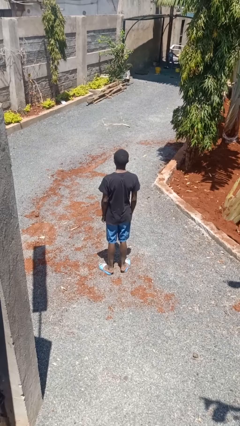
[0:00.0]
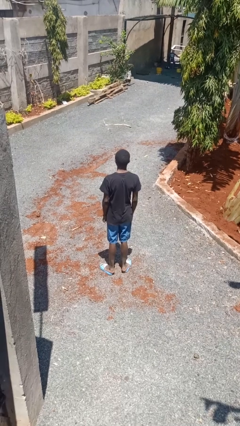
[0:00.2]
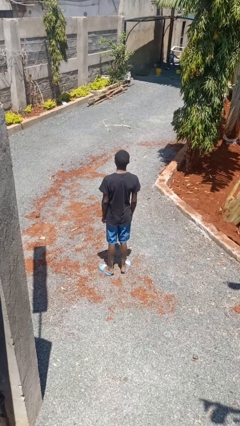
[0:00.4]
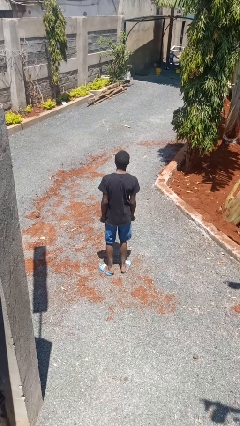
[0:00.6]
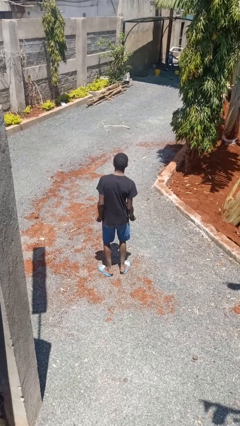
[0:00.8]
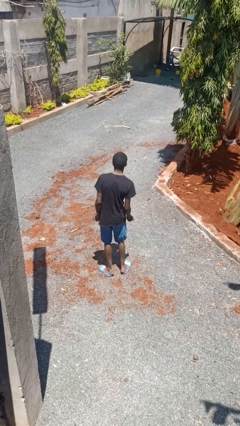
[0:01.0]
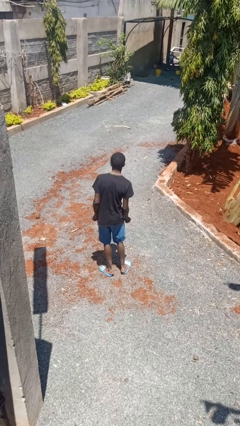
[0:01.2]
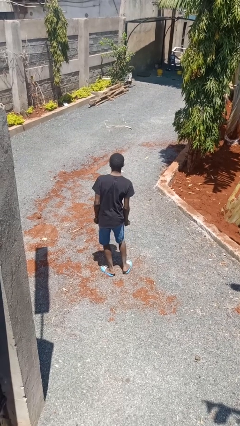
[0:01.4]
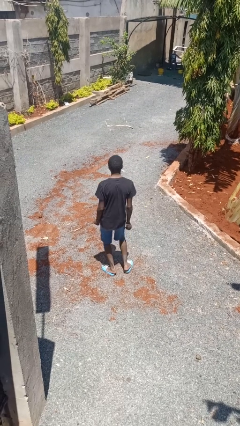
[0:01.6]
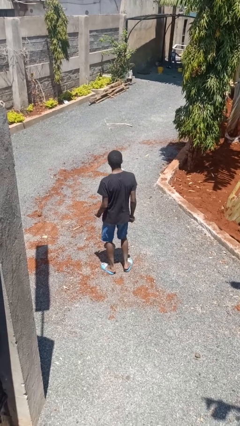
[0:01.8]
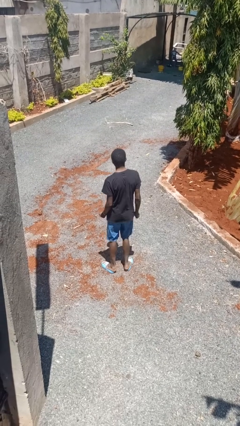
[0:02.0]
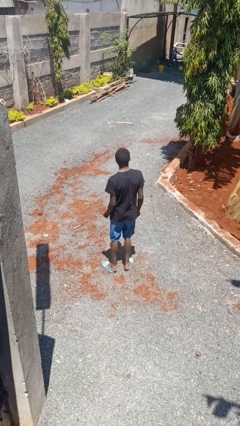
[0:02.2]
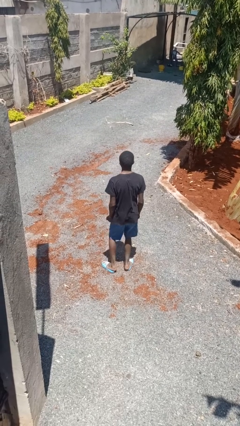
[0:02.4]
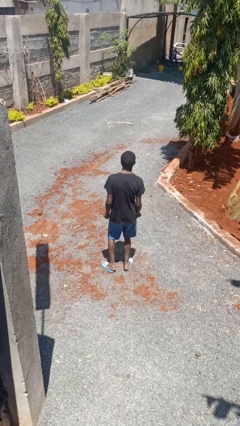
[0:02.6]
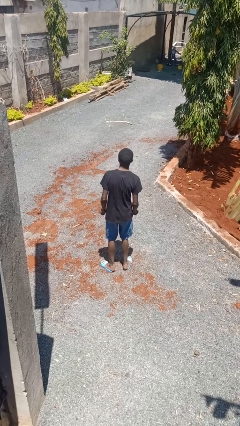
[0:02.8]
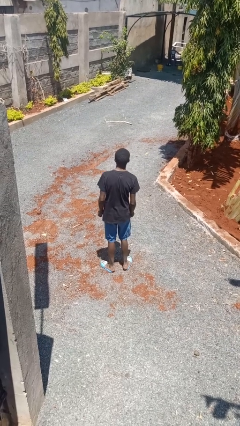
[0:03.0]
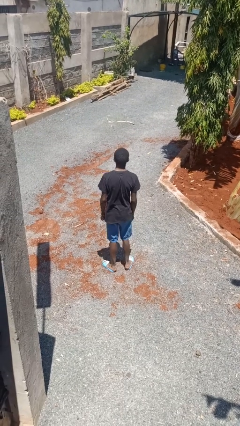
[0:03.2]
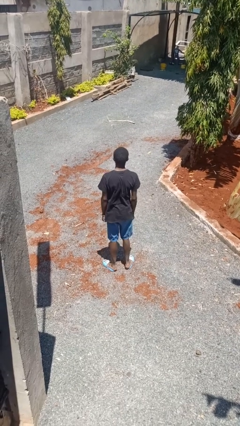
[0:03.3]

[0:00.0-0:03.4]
person dances in place

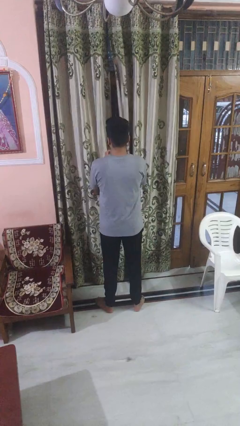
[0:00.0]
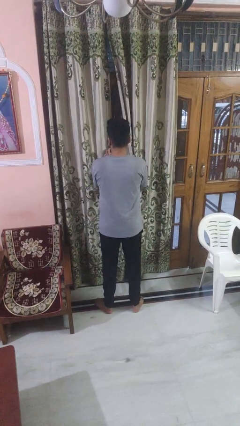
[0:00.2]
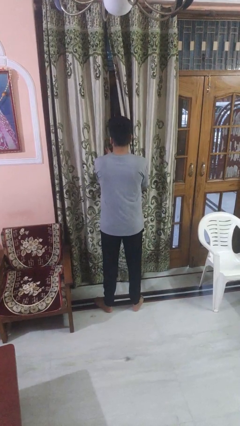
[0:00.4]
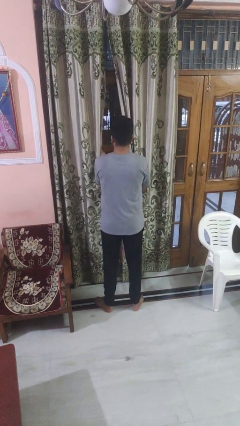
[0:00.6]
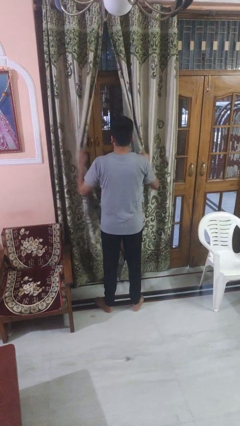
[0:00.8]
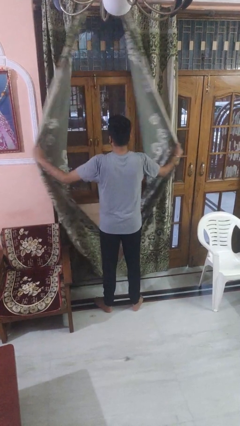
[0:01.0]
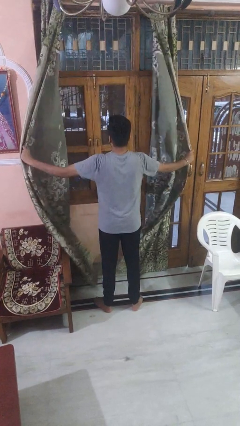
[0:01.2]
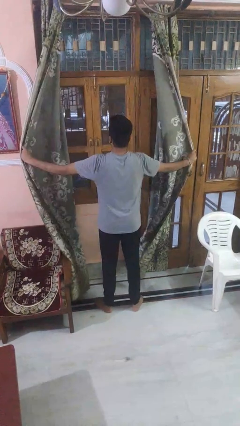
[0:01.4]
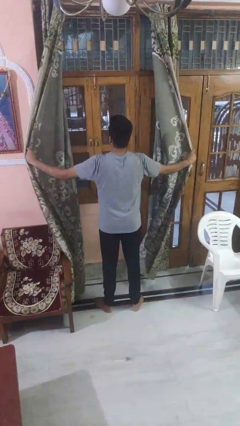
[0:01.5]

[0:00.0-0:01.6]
person opens curtains

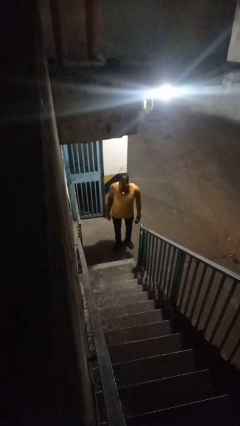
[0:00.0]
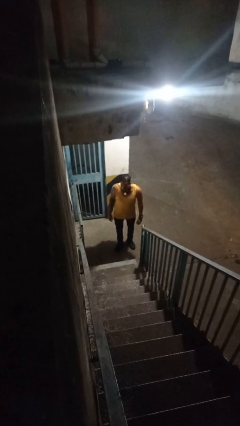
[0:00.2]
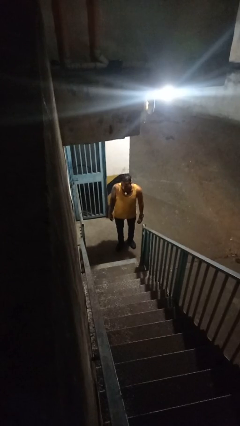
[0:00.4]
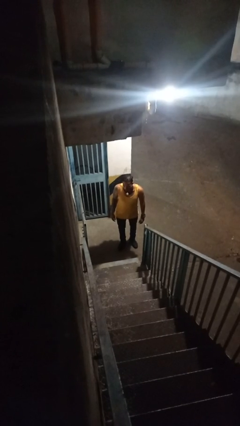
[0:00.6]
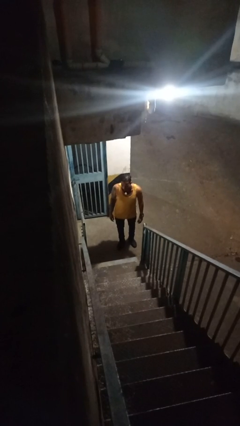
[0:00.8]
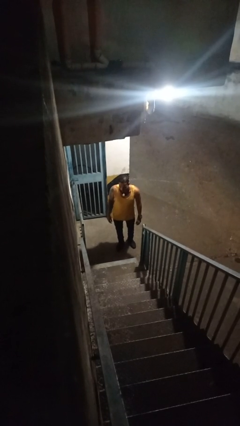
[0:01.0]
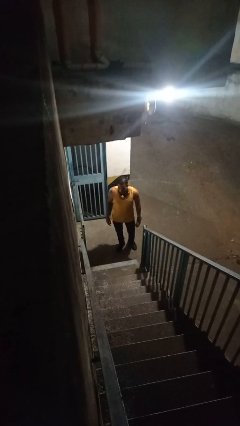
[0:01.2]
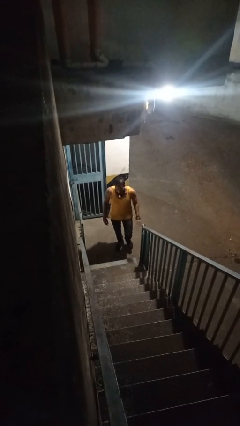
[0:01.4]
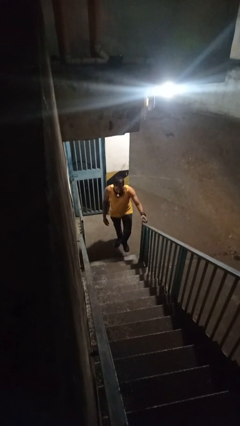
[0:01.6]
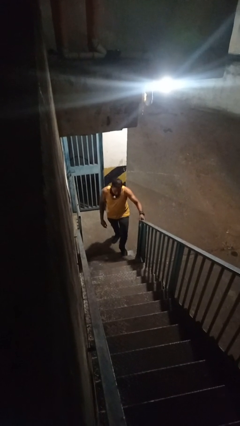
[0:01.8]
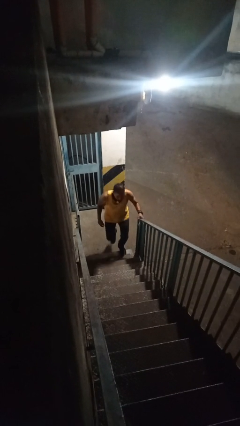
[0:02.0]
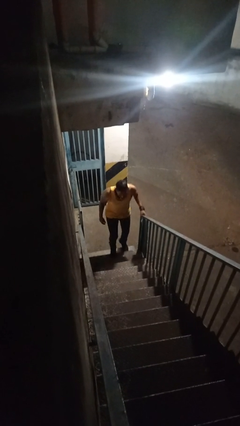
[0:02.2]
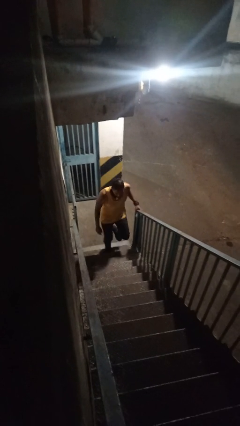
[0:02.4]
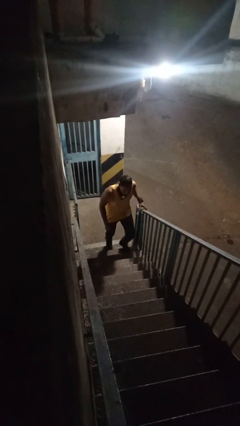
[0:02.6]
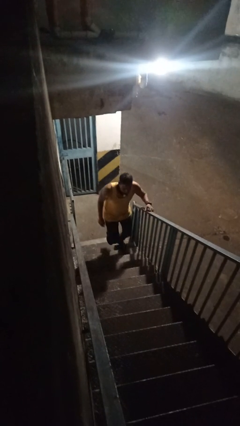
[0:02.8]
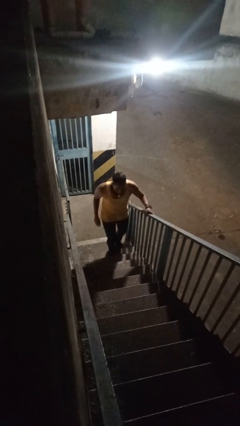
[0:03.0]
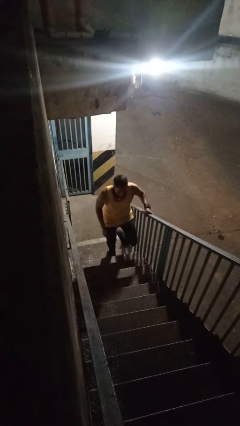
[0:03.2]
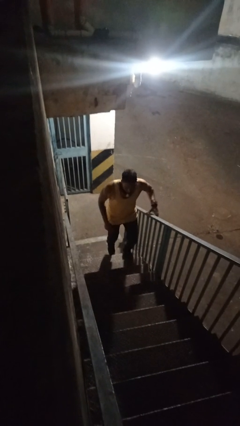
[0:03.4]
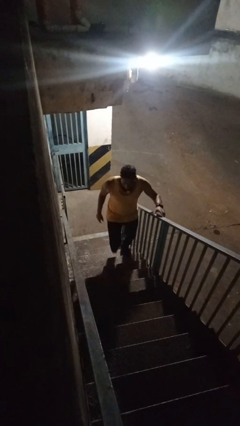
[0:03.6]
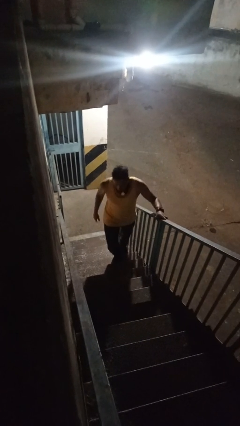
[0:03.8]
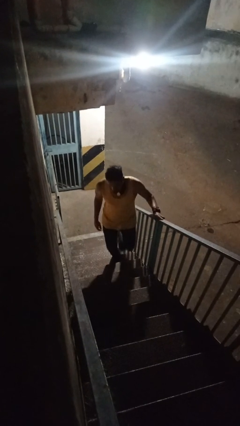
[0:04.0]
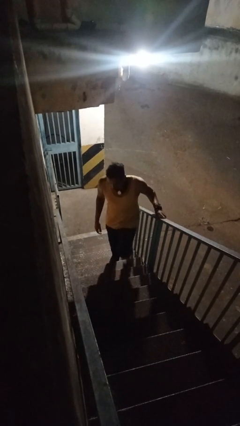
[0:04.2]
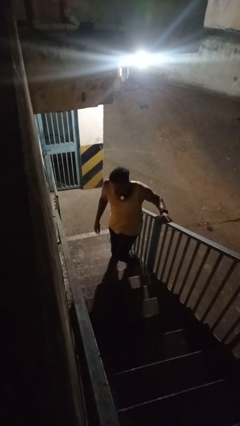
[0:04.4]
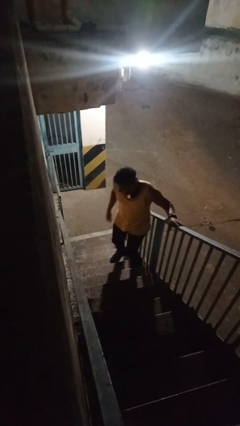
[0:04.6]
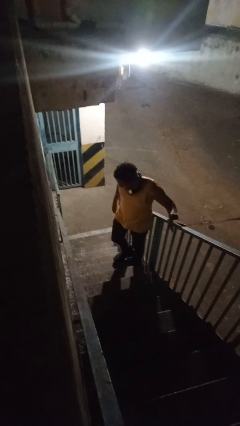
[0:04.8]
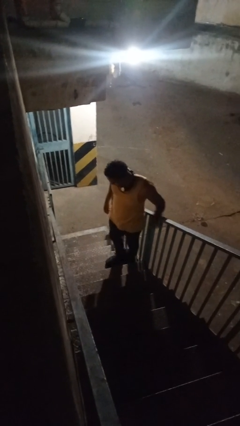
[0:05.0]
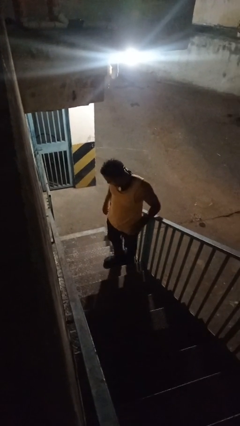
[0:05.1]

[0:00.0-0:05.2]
person climbs up stairs

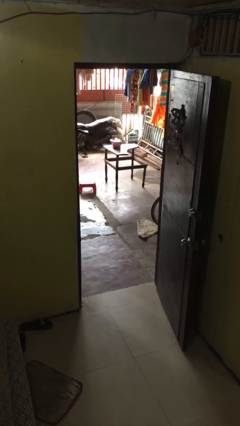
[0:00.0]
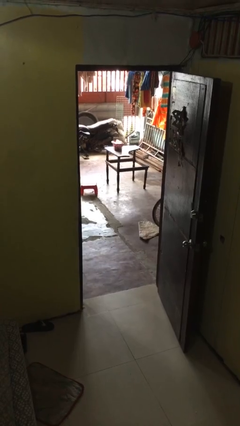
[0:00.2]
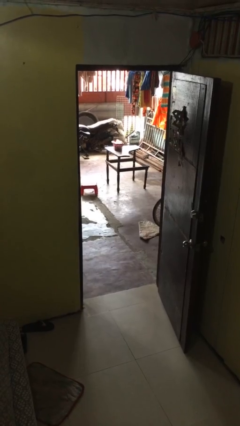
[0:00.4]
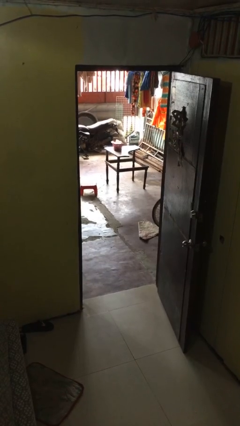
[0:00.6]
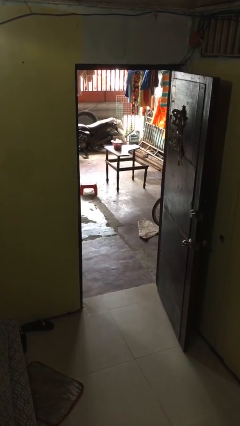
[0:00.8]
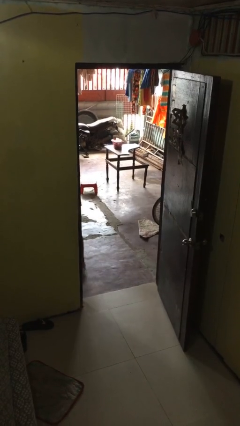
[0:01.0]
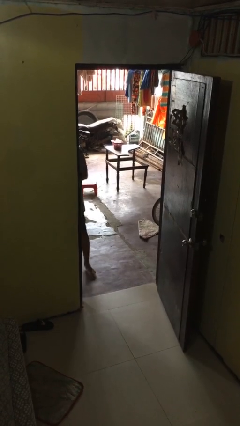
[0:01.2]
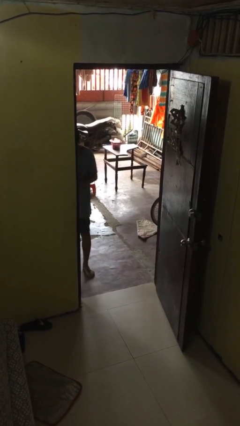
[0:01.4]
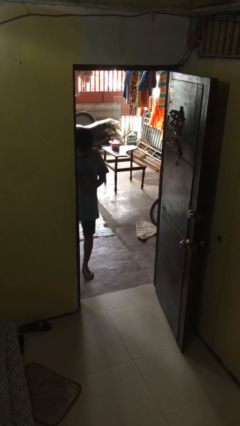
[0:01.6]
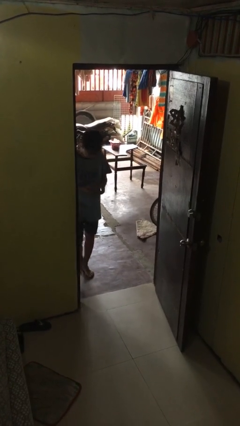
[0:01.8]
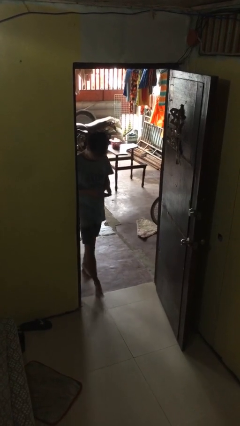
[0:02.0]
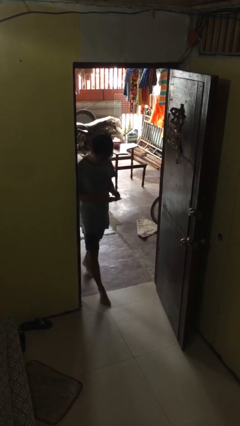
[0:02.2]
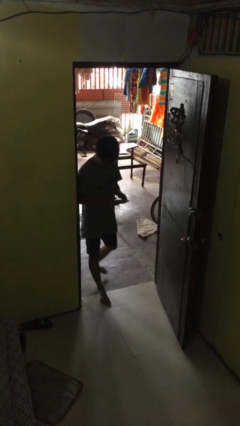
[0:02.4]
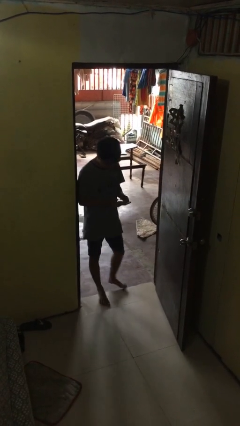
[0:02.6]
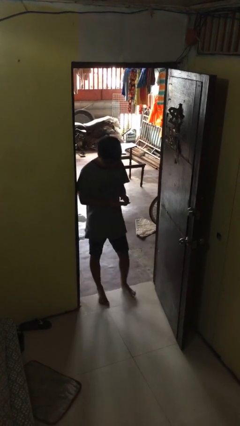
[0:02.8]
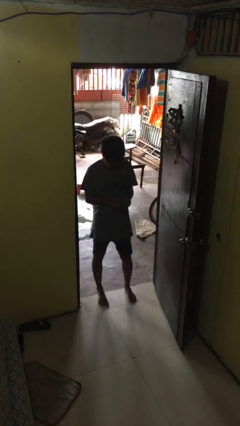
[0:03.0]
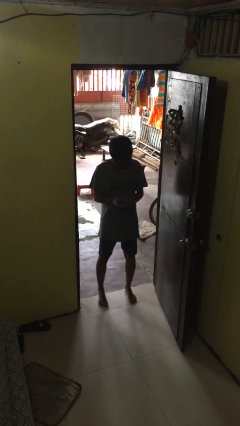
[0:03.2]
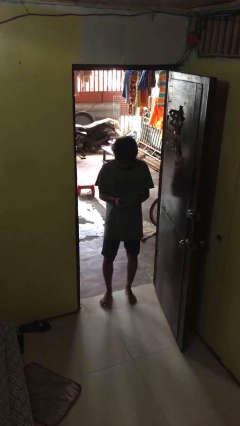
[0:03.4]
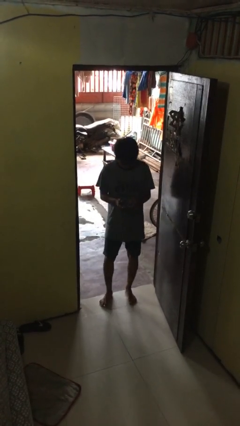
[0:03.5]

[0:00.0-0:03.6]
person enters scene through structure

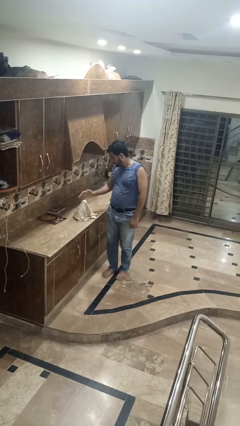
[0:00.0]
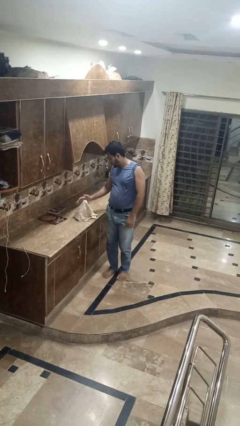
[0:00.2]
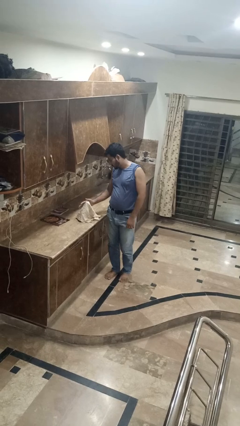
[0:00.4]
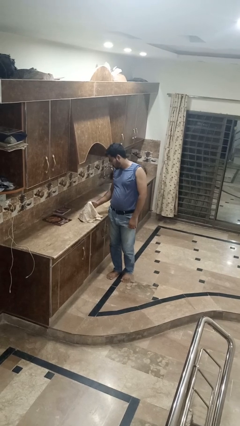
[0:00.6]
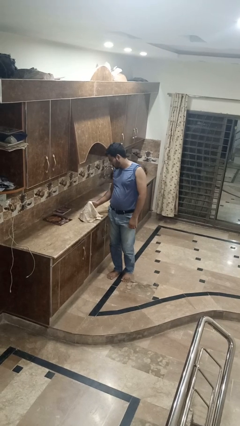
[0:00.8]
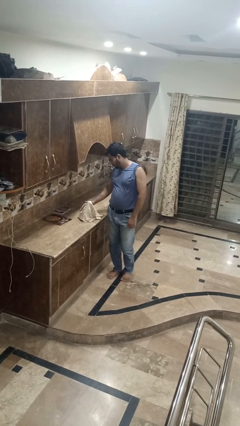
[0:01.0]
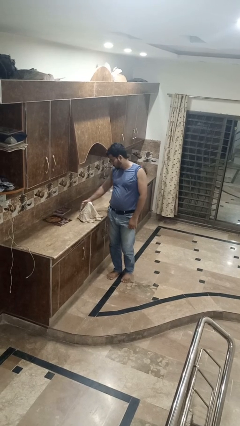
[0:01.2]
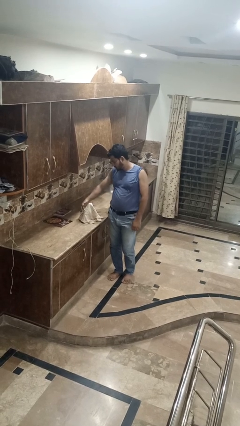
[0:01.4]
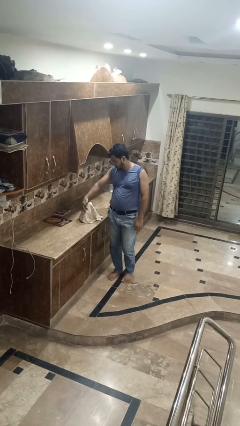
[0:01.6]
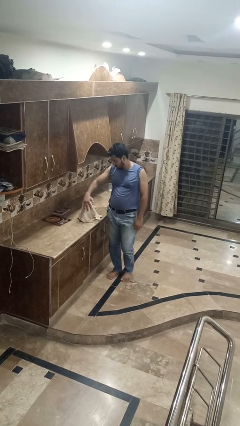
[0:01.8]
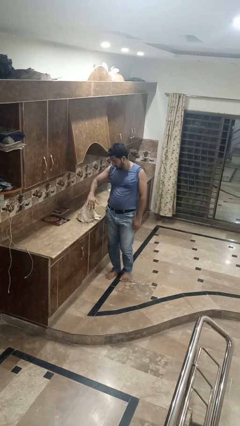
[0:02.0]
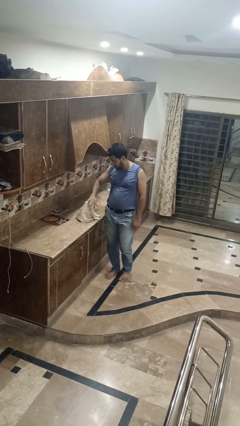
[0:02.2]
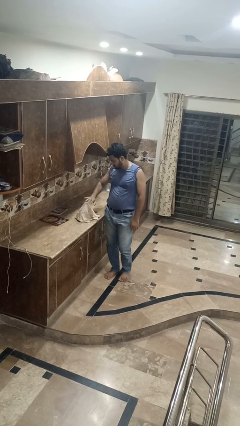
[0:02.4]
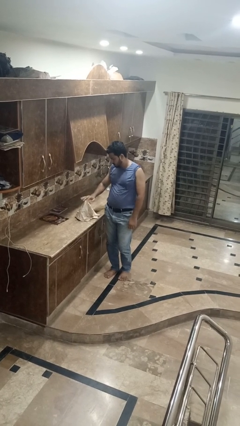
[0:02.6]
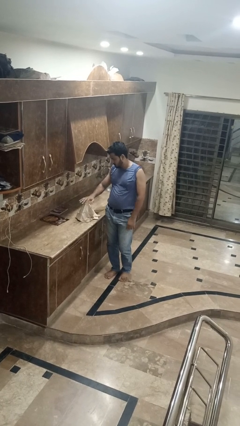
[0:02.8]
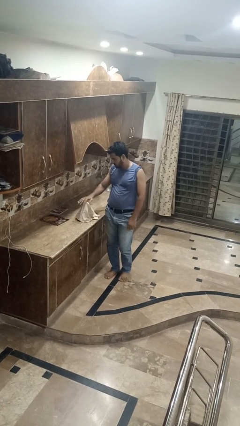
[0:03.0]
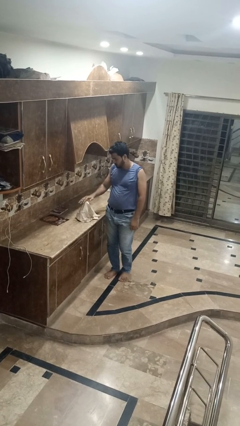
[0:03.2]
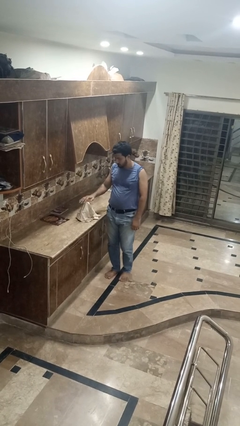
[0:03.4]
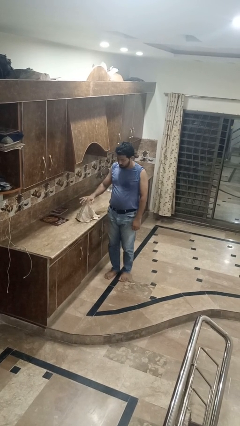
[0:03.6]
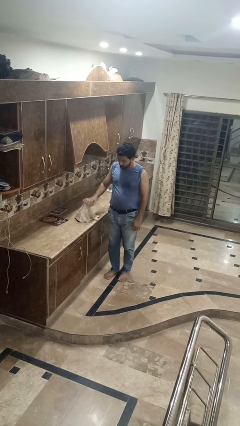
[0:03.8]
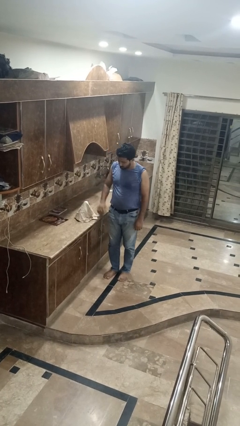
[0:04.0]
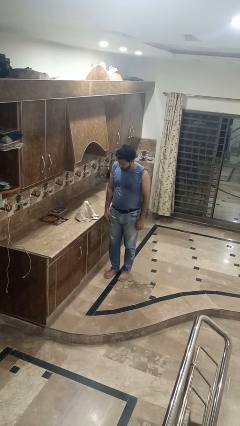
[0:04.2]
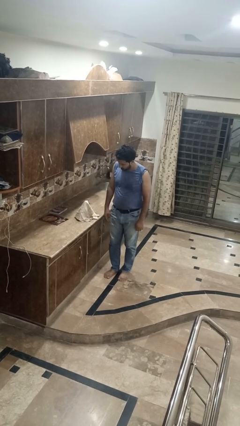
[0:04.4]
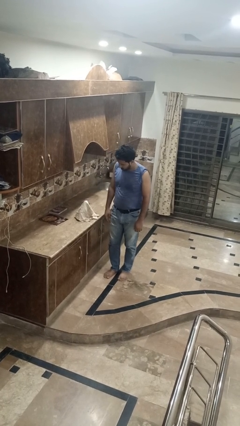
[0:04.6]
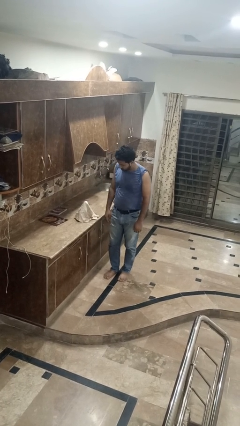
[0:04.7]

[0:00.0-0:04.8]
person waves hand over object
